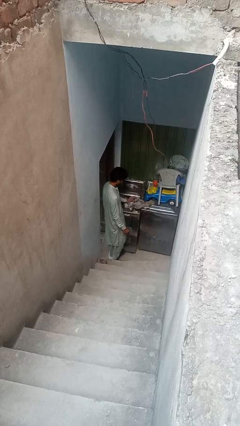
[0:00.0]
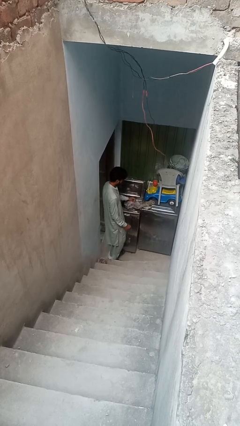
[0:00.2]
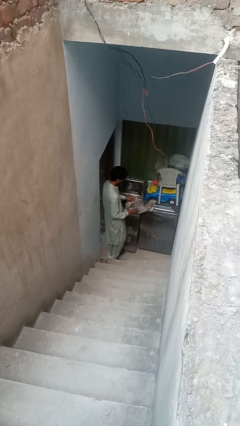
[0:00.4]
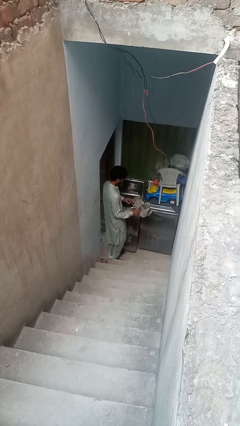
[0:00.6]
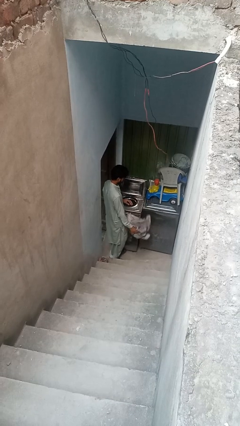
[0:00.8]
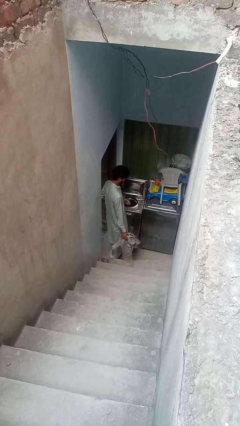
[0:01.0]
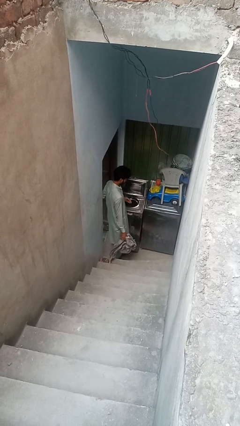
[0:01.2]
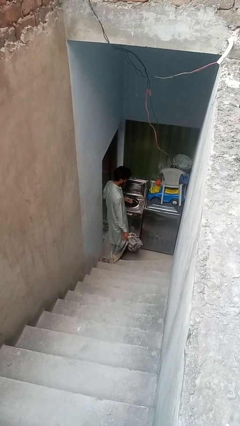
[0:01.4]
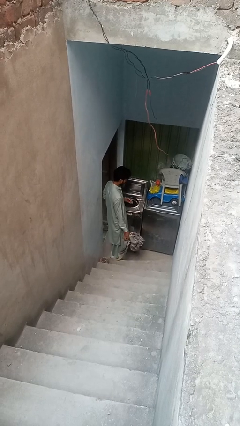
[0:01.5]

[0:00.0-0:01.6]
person unloads clotheswasher

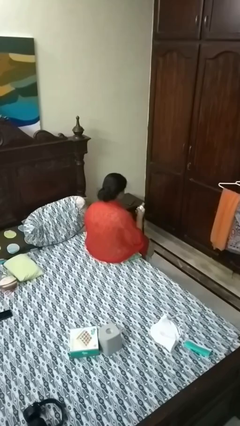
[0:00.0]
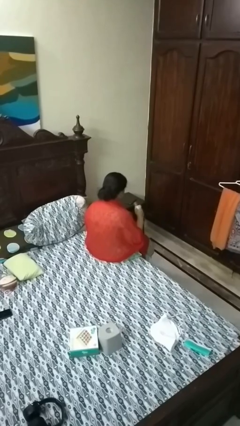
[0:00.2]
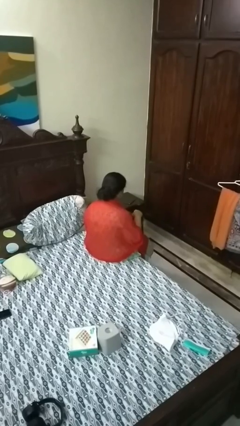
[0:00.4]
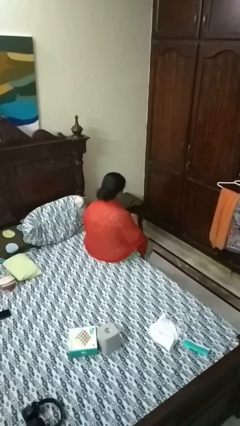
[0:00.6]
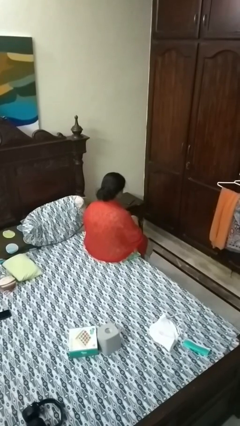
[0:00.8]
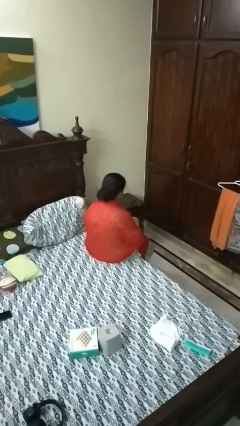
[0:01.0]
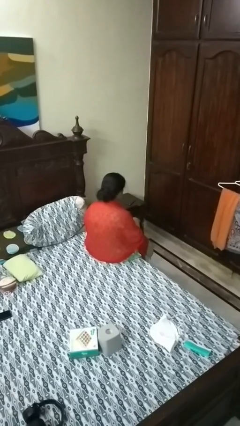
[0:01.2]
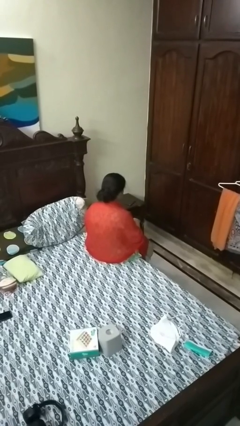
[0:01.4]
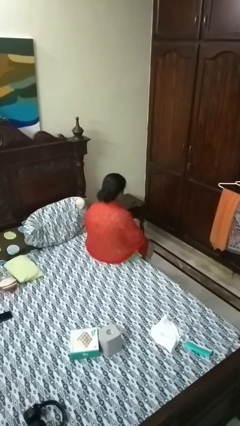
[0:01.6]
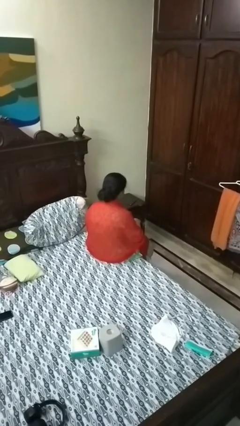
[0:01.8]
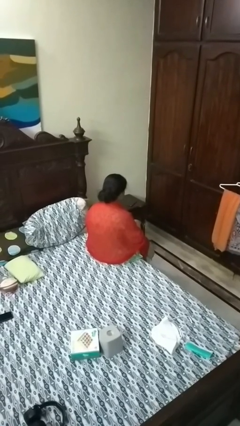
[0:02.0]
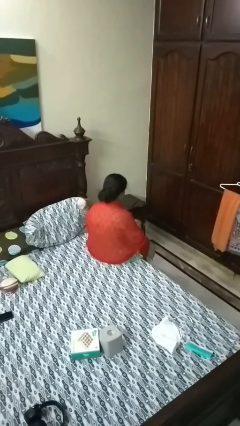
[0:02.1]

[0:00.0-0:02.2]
person puts object into purse

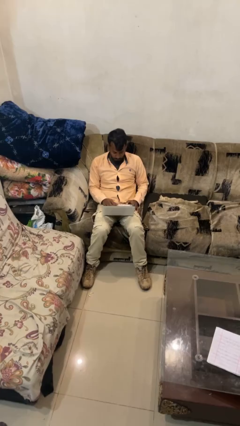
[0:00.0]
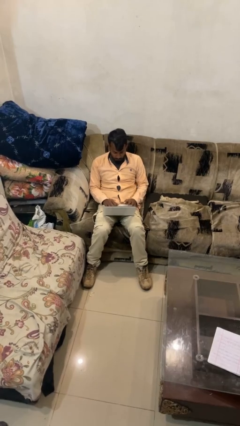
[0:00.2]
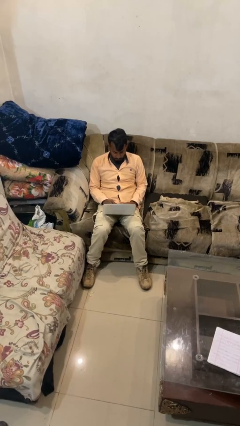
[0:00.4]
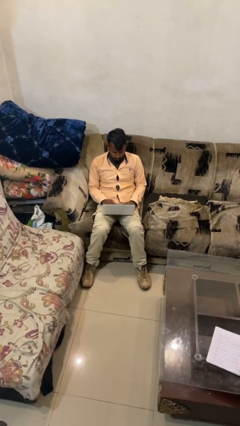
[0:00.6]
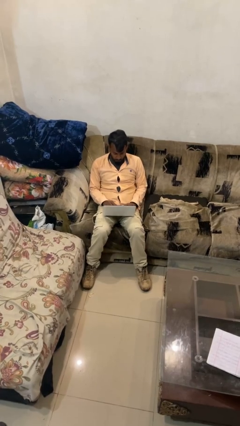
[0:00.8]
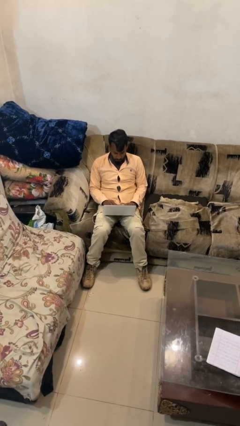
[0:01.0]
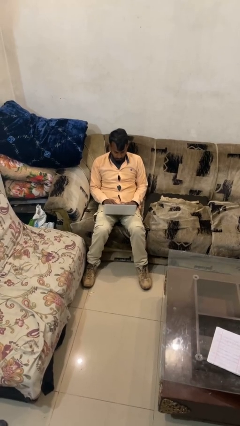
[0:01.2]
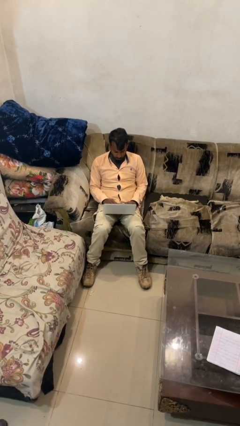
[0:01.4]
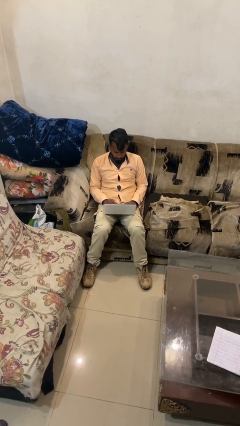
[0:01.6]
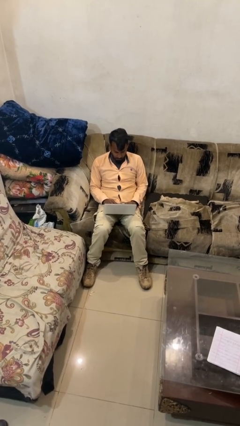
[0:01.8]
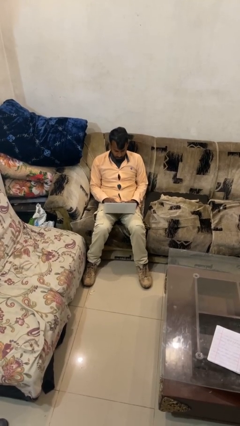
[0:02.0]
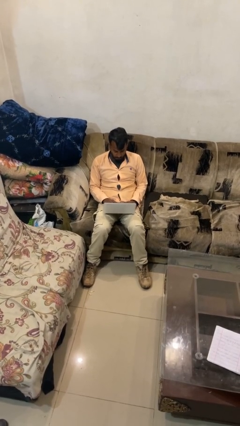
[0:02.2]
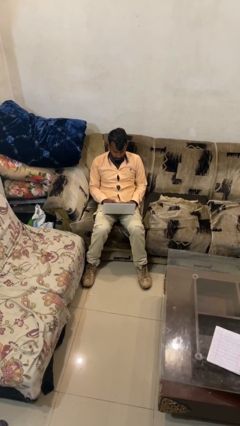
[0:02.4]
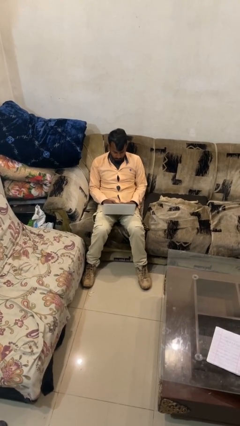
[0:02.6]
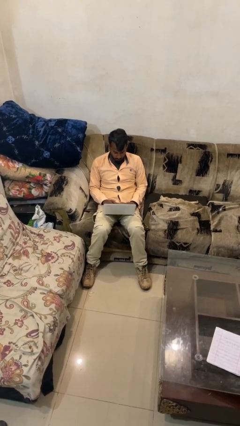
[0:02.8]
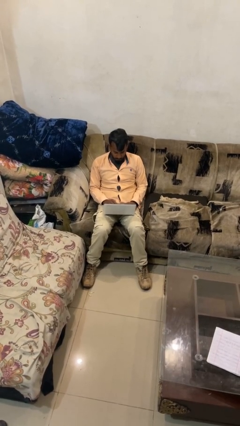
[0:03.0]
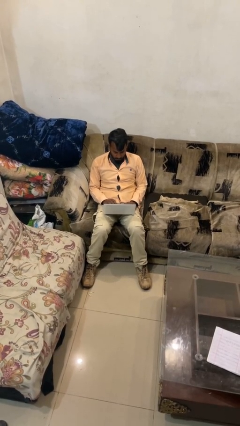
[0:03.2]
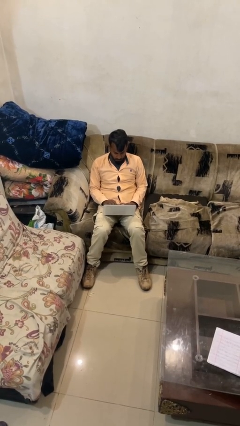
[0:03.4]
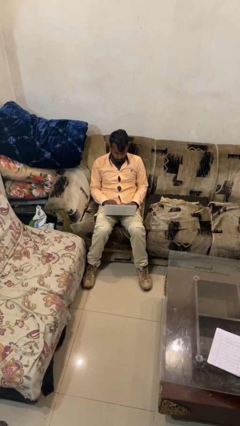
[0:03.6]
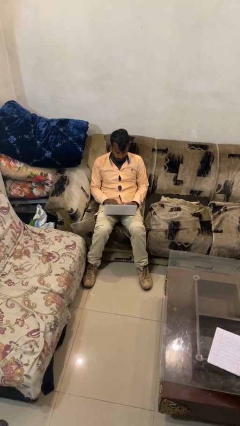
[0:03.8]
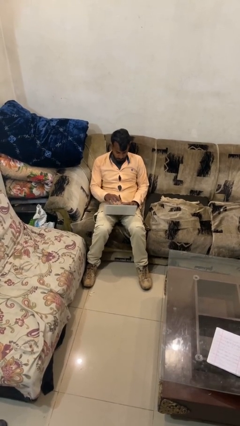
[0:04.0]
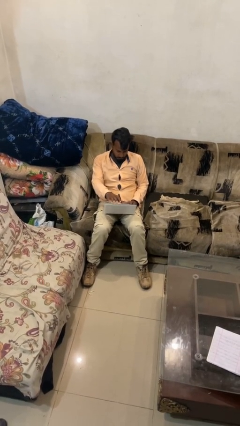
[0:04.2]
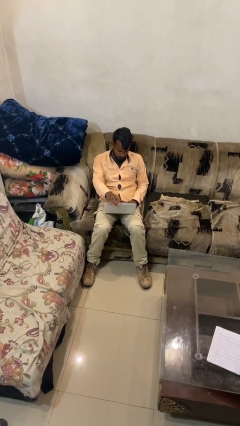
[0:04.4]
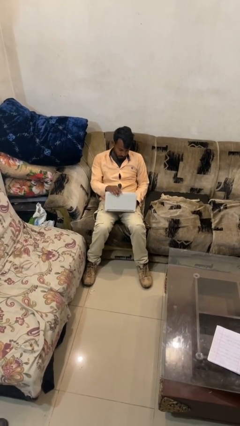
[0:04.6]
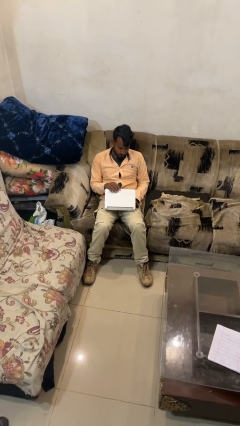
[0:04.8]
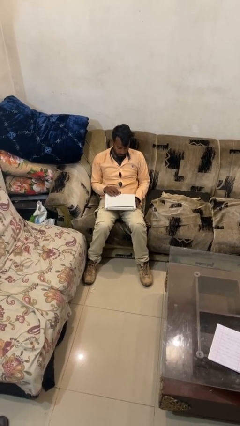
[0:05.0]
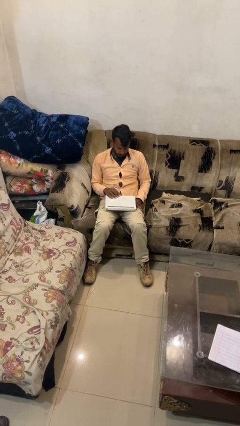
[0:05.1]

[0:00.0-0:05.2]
person interacts with laptop

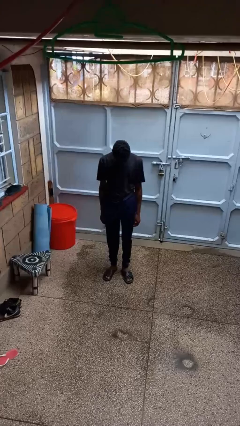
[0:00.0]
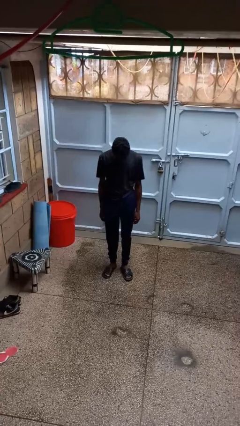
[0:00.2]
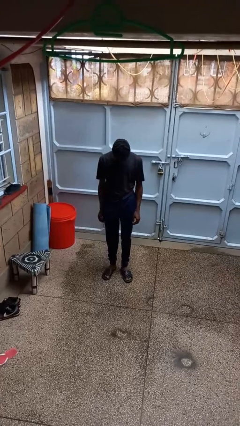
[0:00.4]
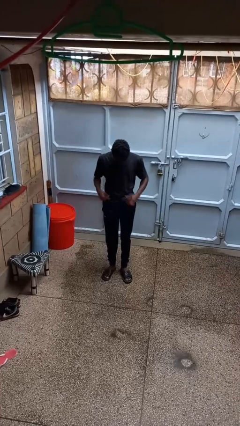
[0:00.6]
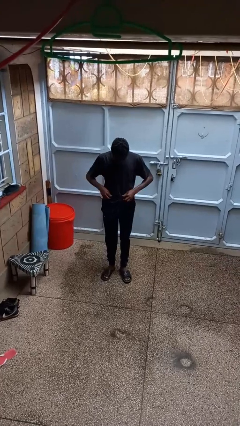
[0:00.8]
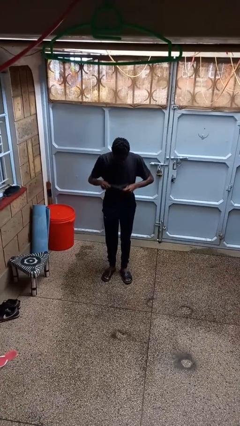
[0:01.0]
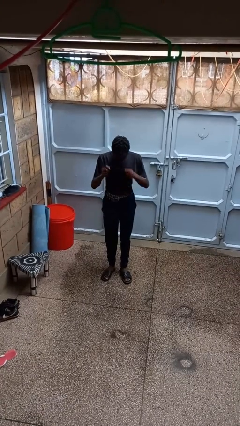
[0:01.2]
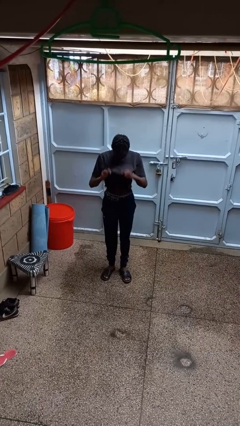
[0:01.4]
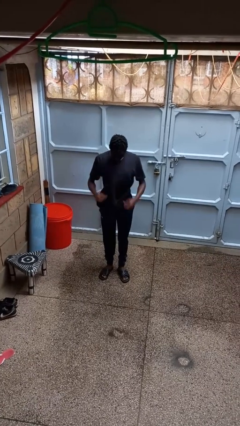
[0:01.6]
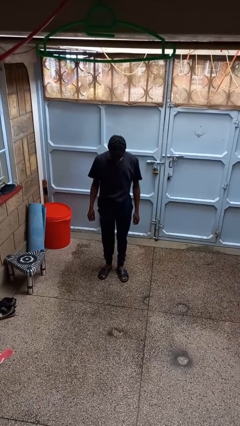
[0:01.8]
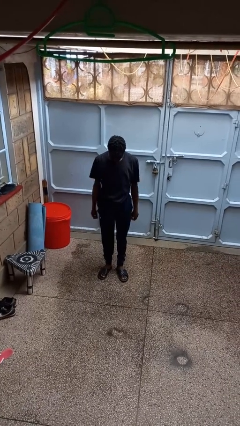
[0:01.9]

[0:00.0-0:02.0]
person untucks shirt

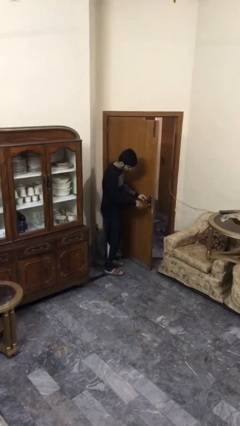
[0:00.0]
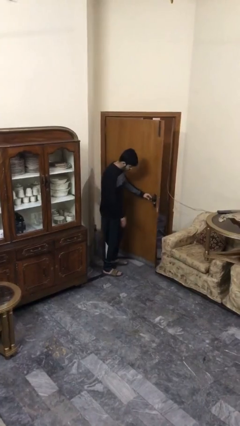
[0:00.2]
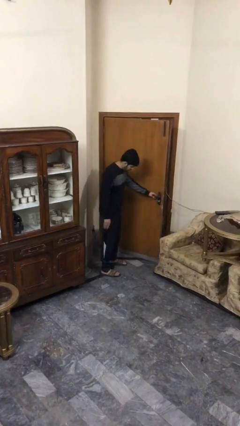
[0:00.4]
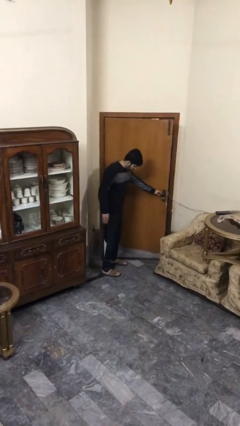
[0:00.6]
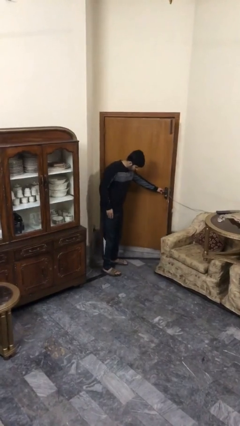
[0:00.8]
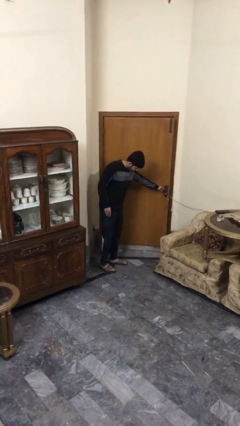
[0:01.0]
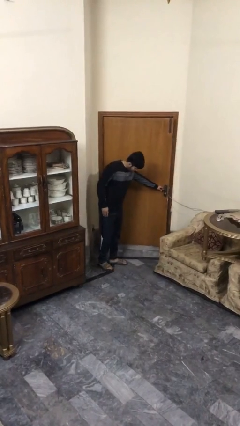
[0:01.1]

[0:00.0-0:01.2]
person closes facility door

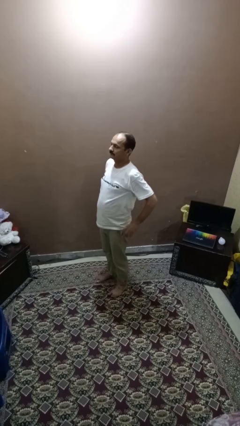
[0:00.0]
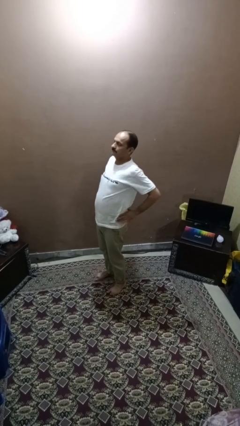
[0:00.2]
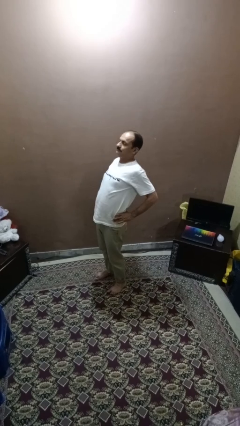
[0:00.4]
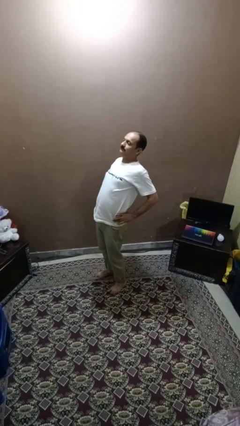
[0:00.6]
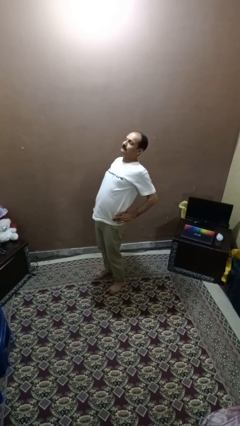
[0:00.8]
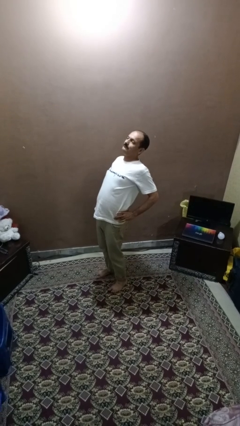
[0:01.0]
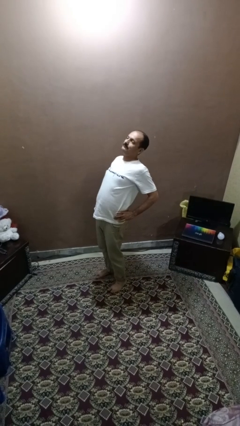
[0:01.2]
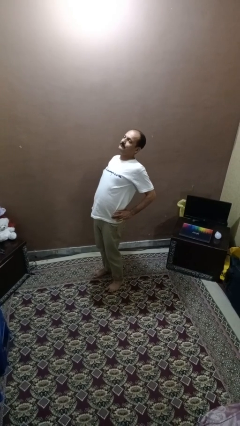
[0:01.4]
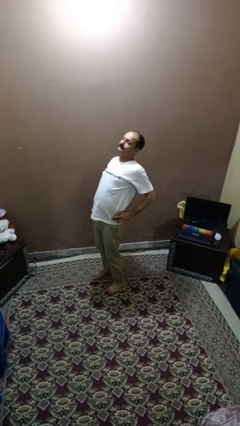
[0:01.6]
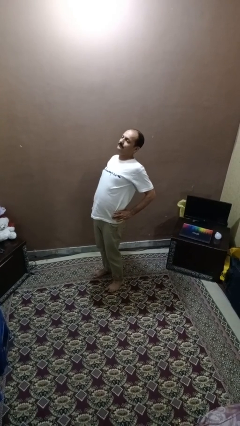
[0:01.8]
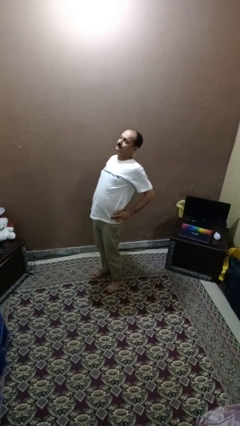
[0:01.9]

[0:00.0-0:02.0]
person stretches back

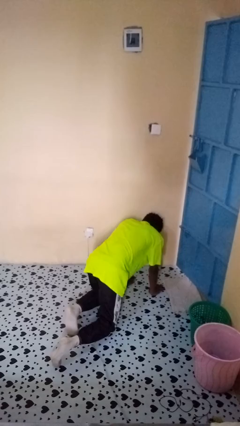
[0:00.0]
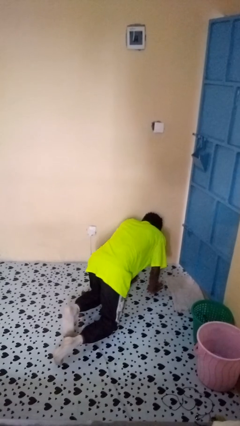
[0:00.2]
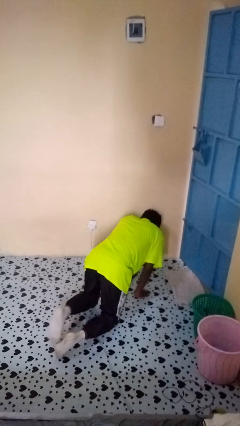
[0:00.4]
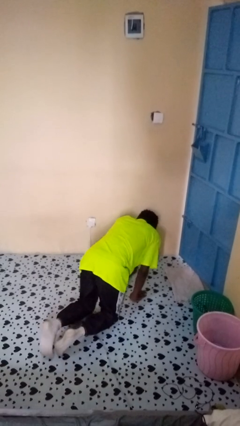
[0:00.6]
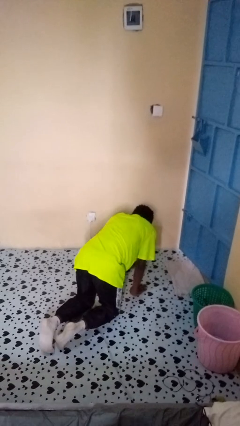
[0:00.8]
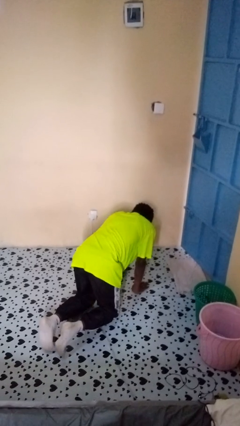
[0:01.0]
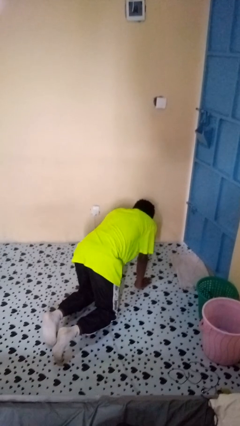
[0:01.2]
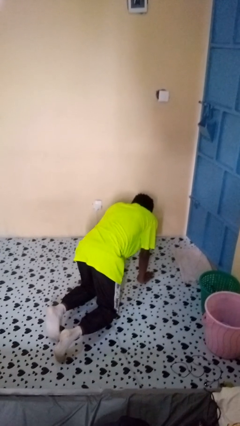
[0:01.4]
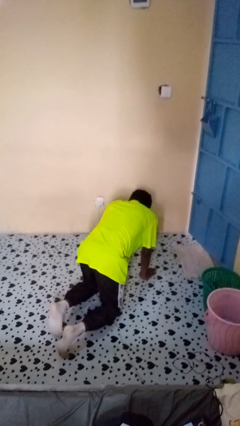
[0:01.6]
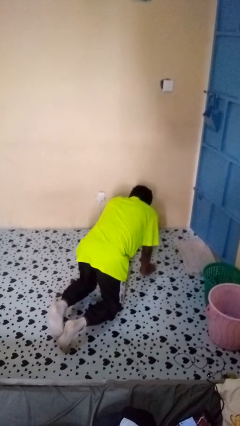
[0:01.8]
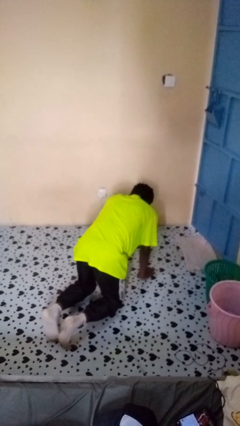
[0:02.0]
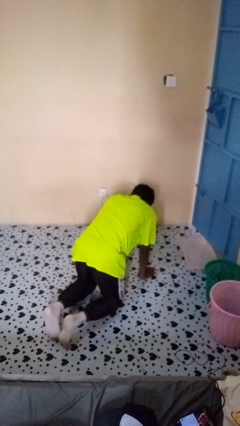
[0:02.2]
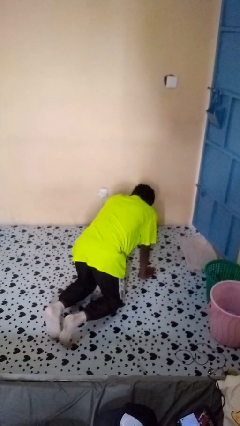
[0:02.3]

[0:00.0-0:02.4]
person crawls

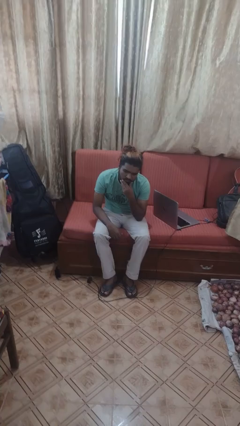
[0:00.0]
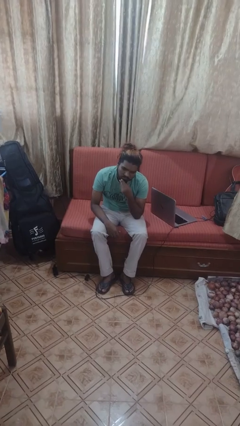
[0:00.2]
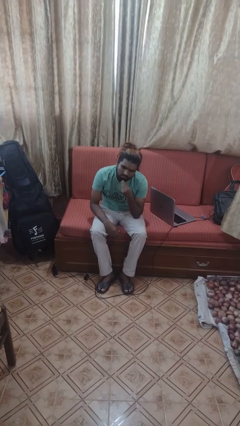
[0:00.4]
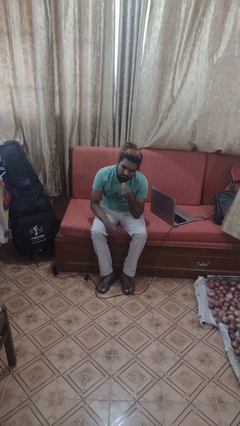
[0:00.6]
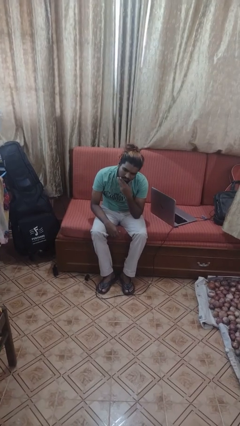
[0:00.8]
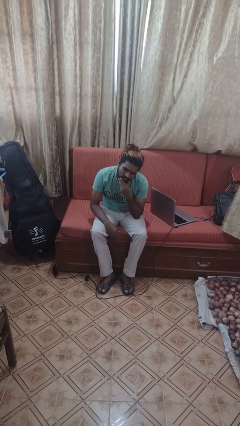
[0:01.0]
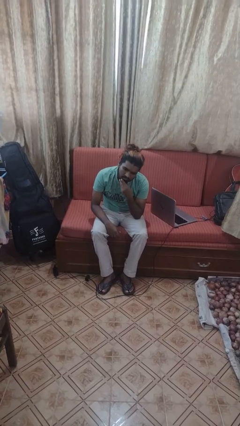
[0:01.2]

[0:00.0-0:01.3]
person strokes chin
